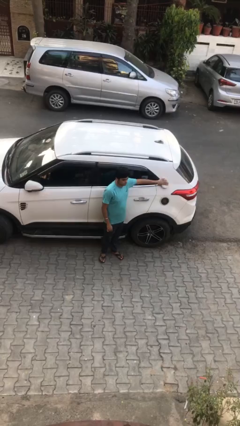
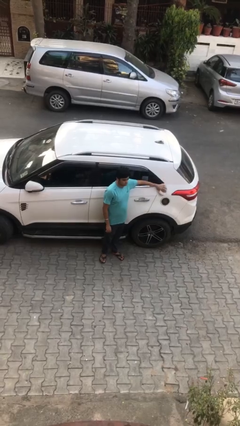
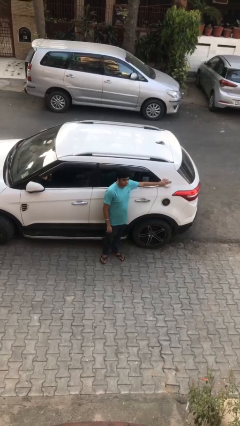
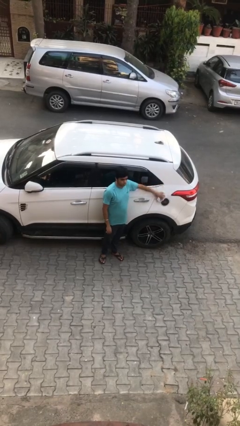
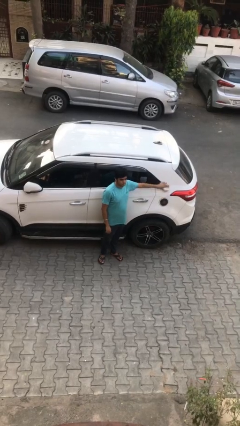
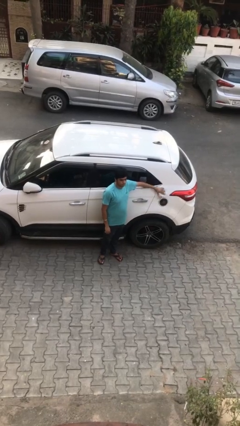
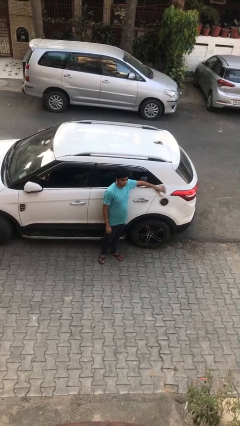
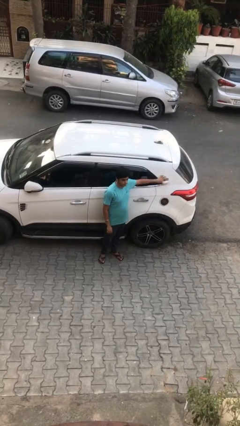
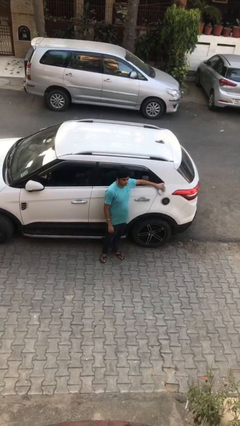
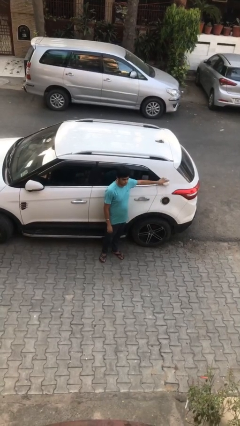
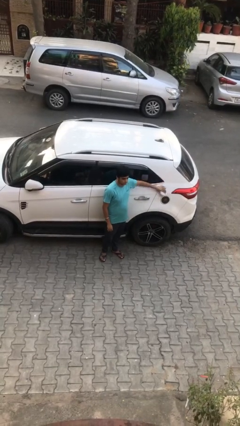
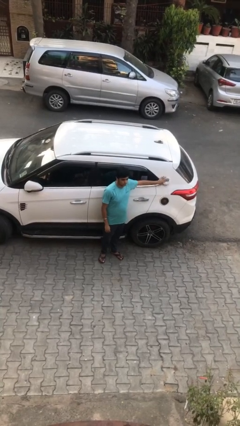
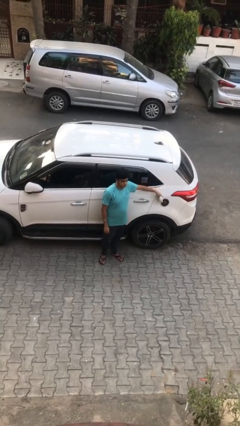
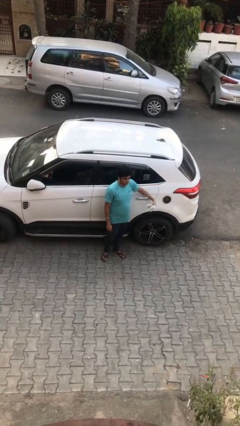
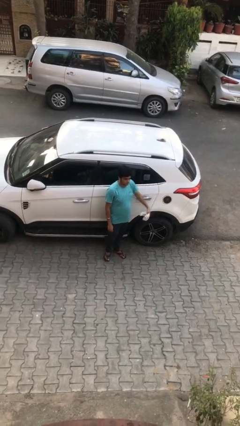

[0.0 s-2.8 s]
person polishes car with rag

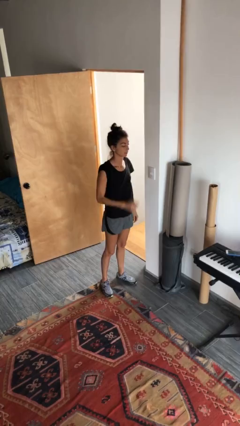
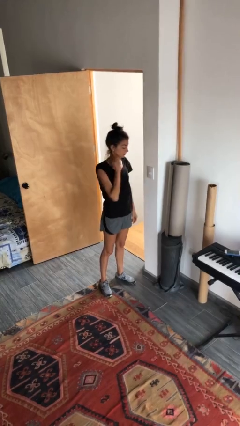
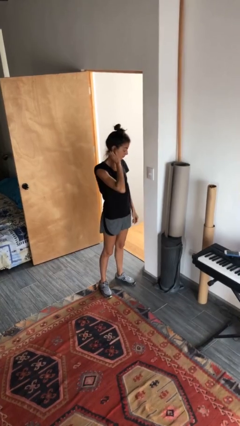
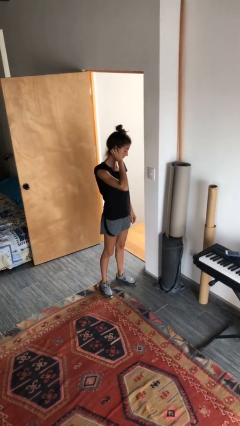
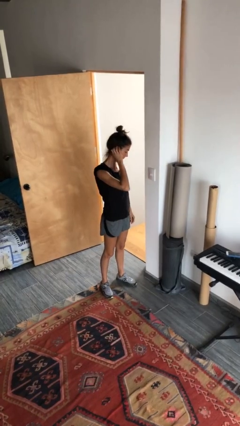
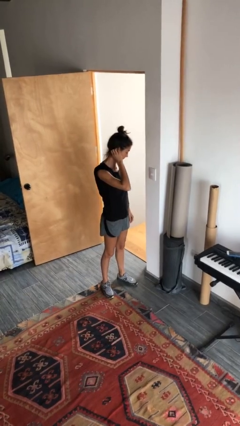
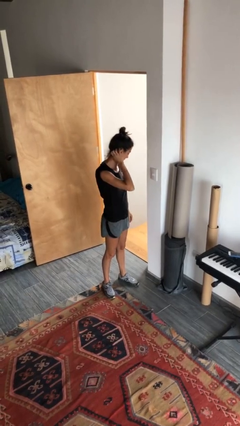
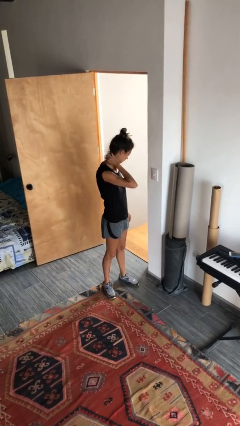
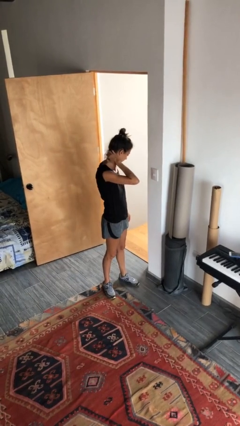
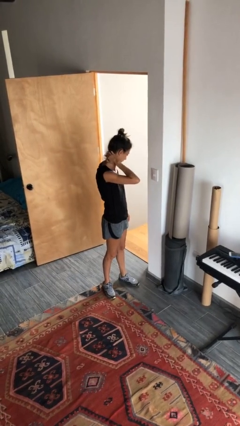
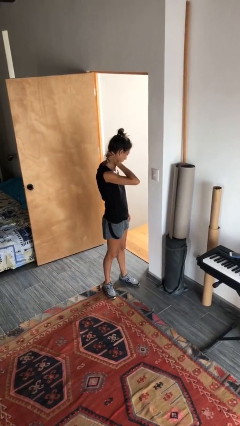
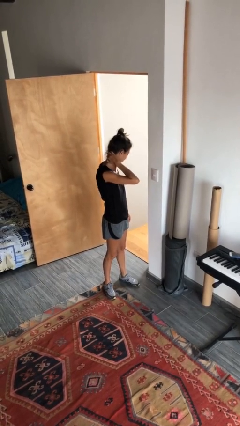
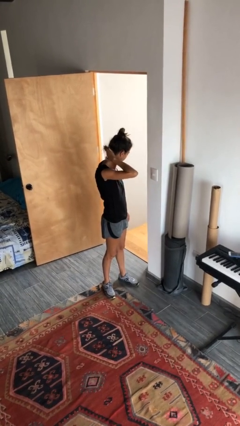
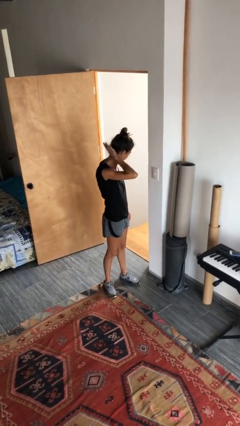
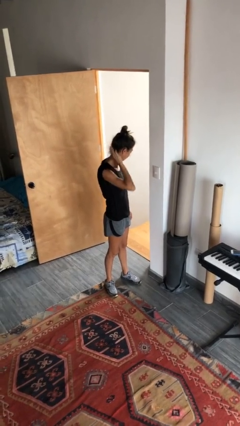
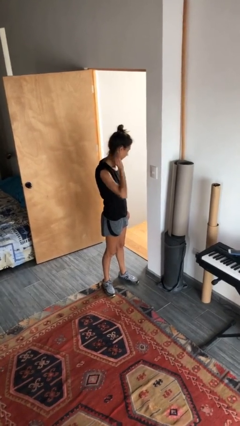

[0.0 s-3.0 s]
person scratches face

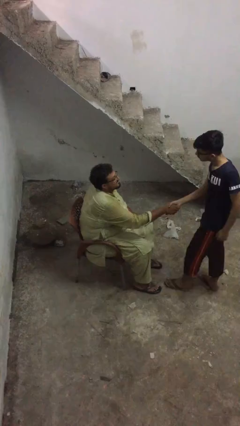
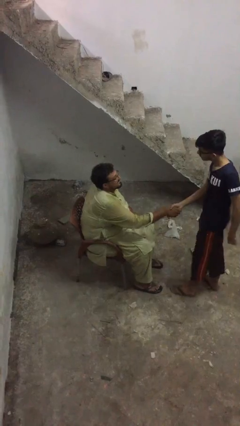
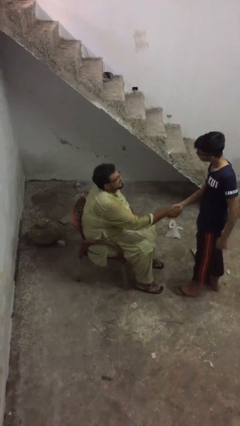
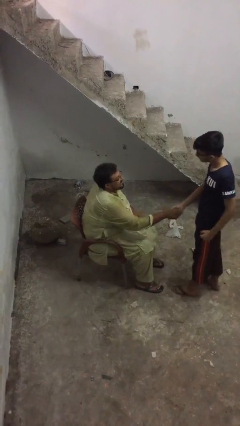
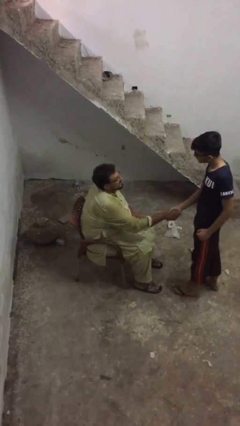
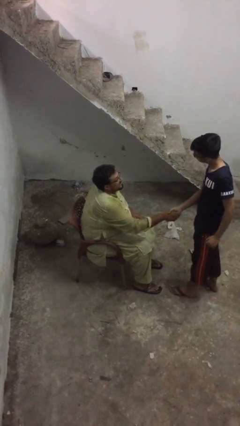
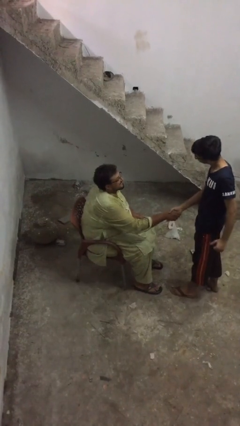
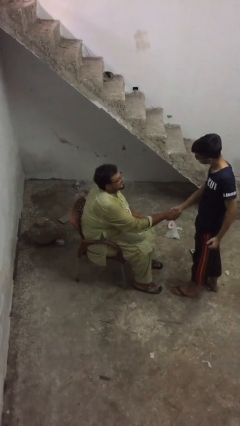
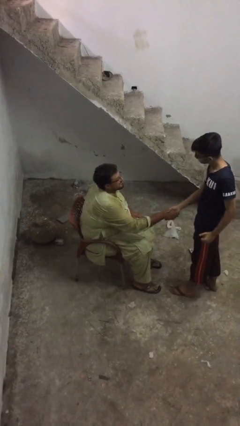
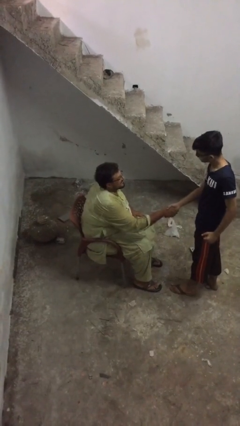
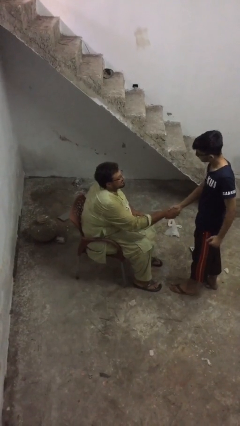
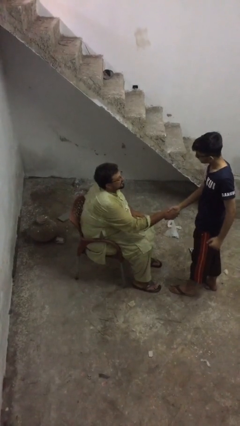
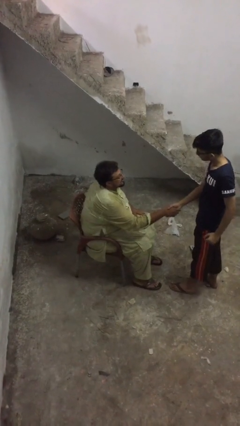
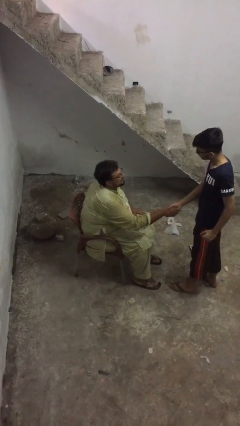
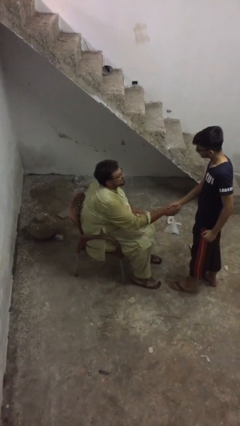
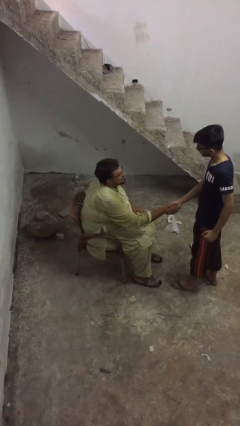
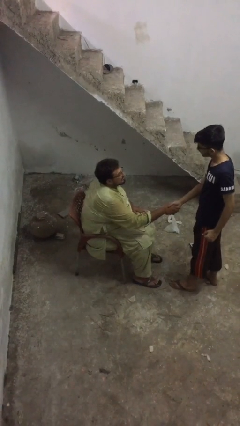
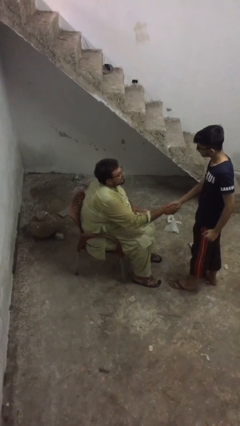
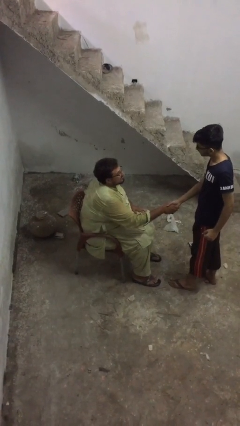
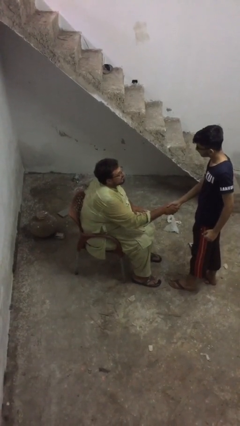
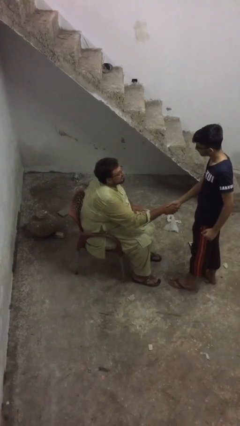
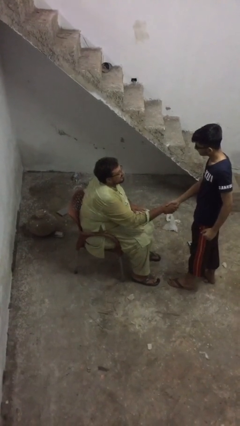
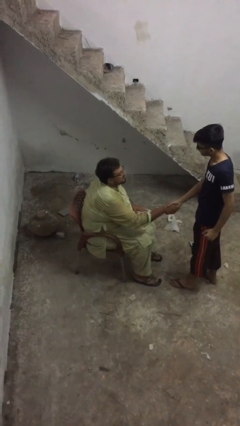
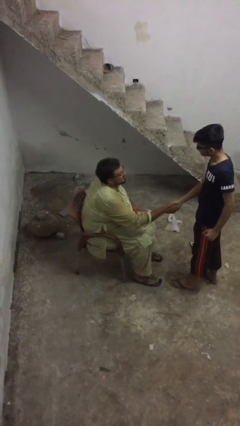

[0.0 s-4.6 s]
person shakes hand

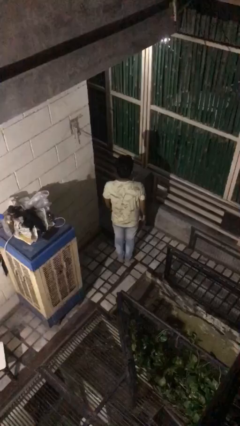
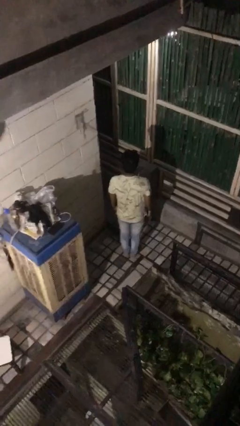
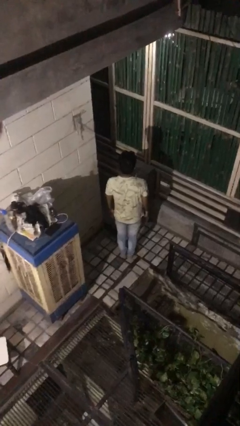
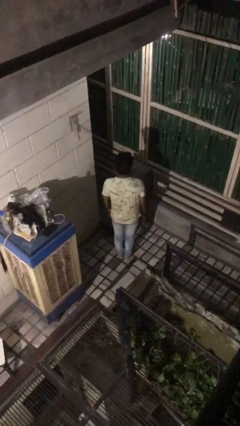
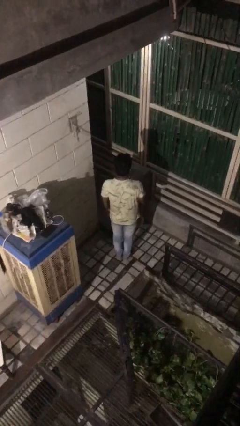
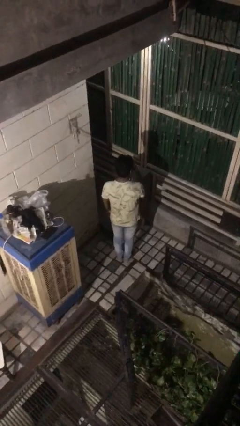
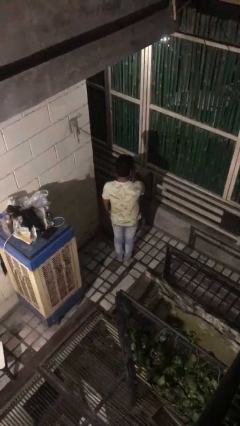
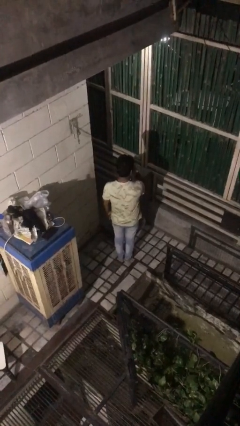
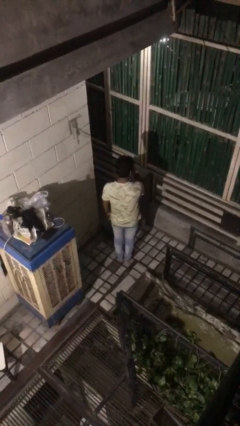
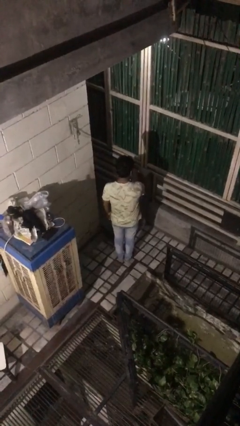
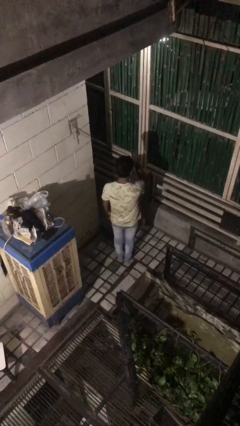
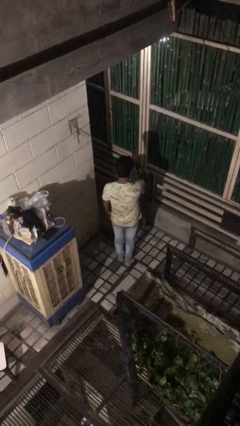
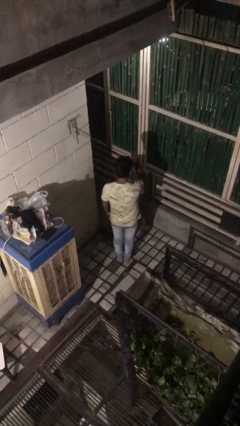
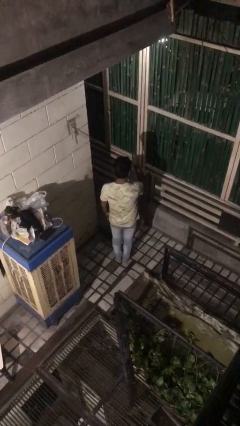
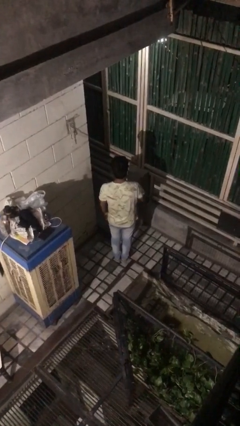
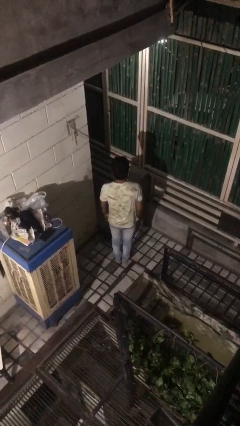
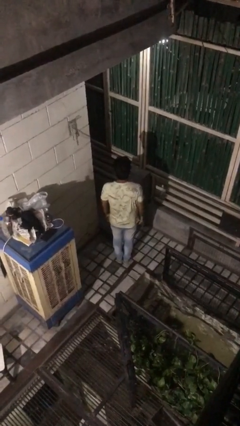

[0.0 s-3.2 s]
person gestures watch closely

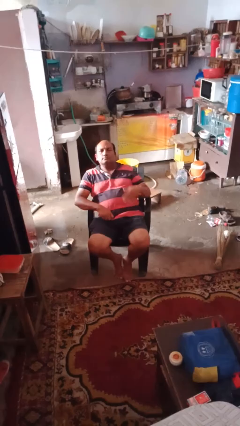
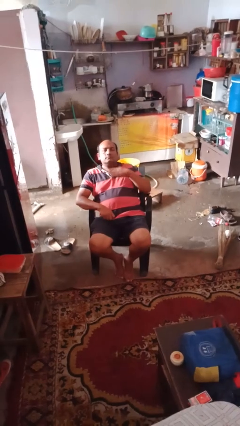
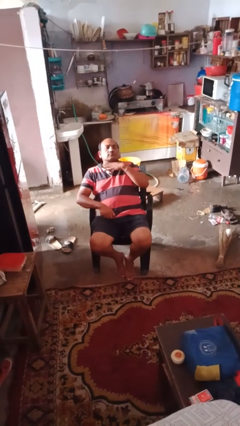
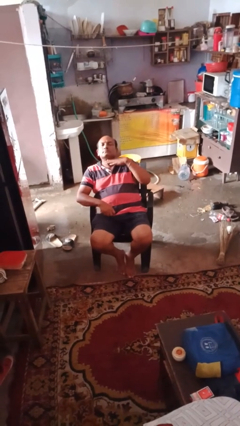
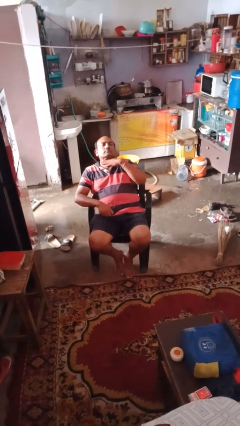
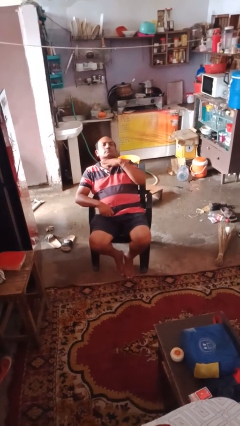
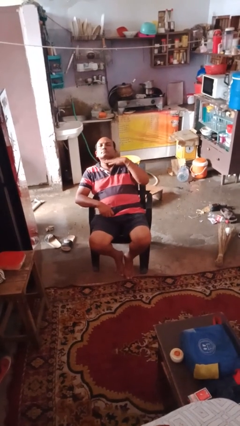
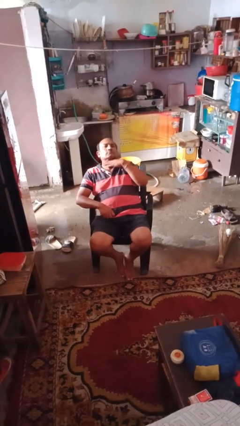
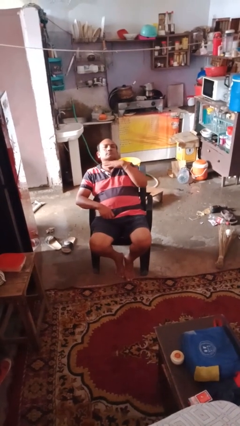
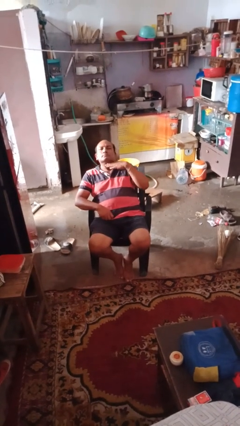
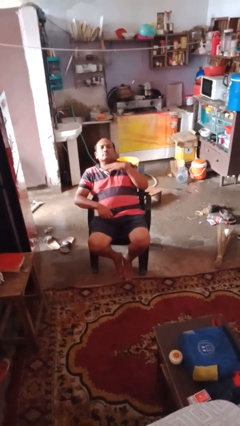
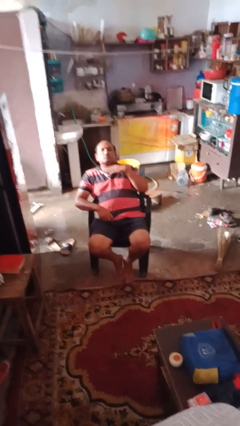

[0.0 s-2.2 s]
person gestures cut

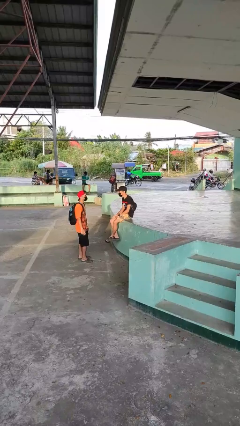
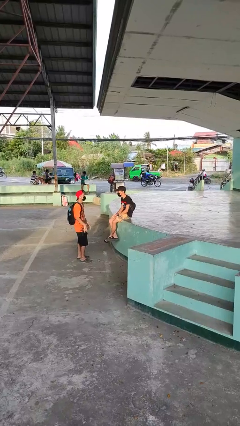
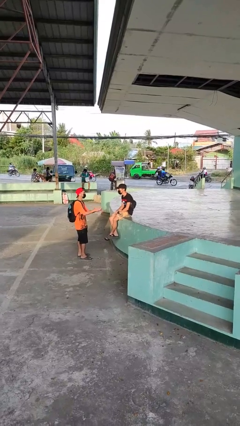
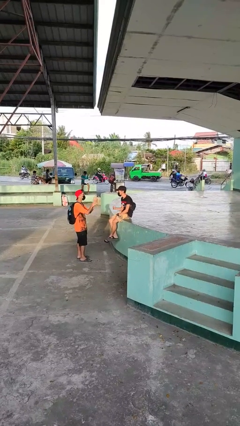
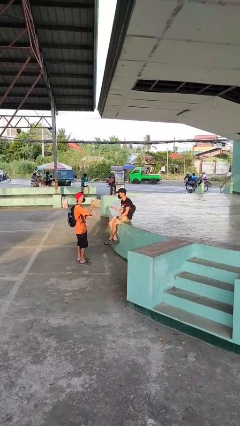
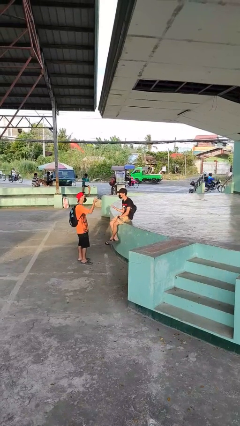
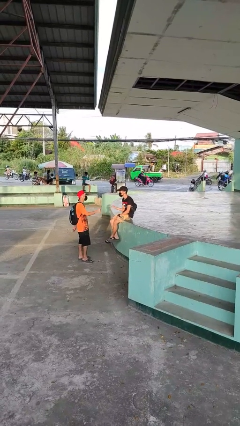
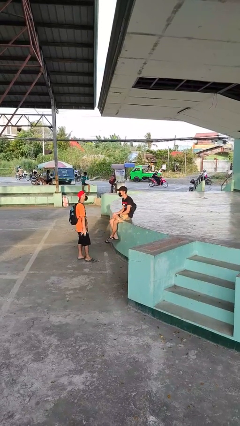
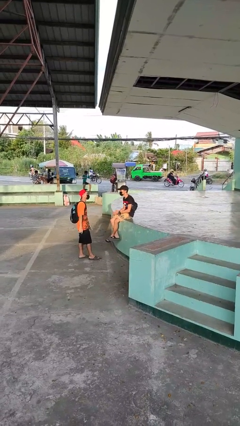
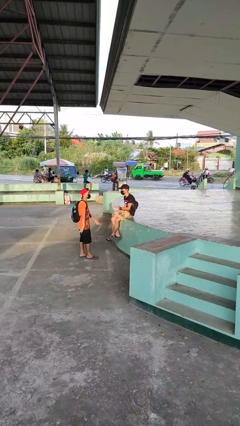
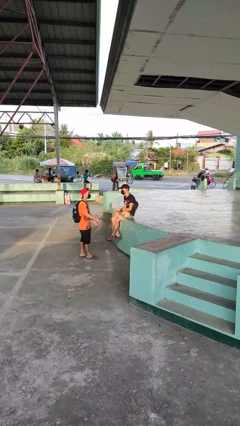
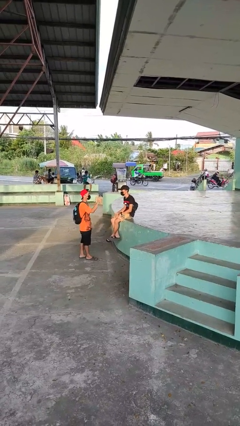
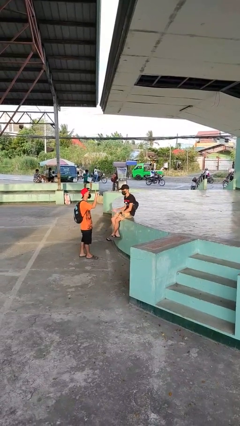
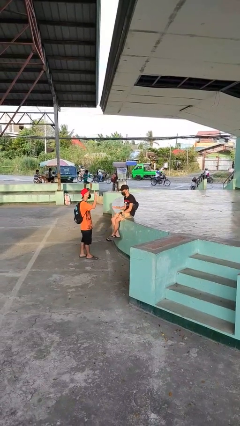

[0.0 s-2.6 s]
person talks to person
